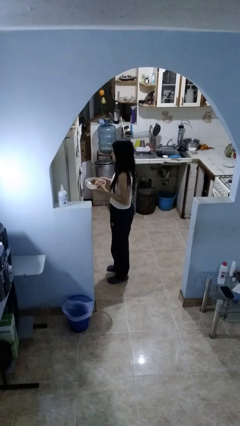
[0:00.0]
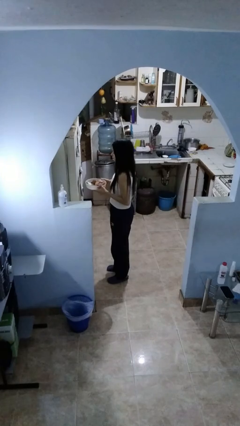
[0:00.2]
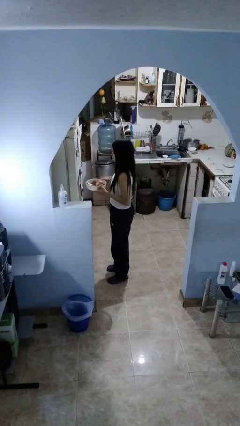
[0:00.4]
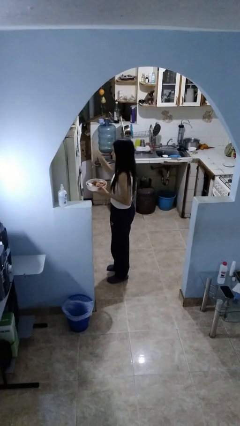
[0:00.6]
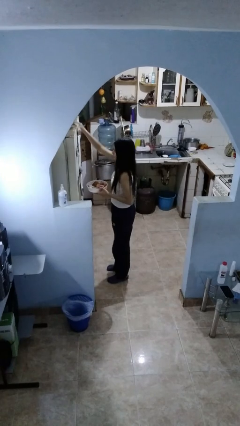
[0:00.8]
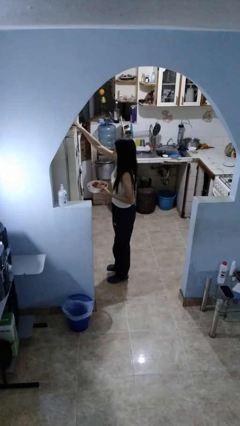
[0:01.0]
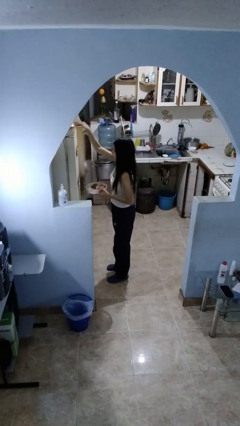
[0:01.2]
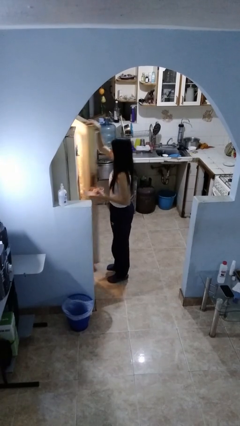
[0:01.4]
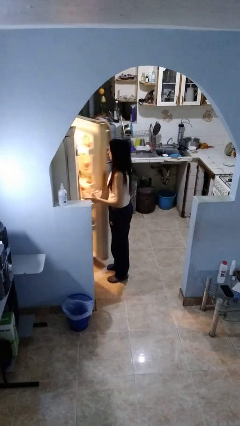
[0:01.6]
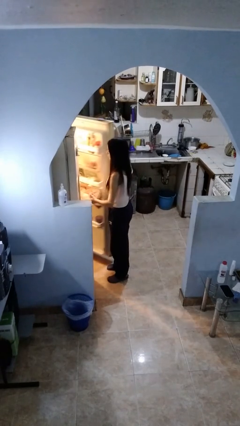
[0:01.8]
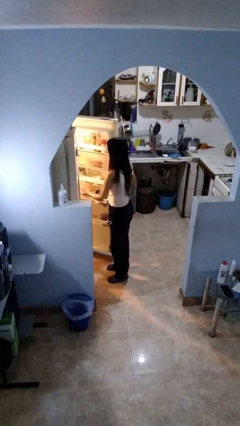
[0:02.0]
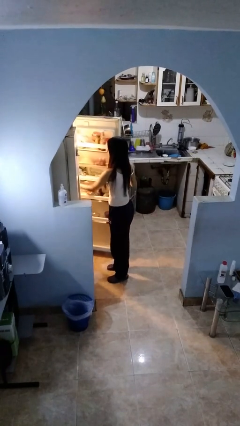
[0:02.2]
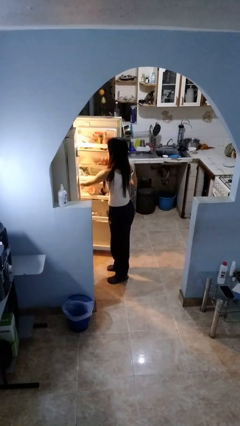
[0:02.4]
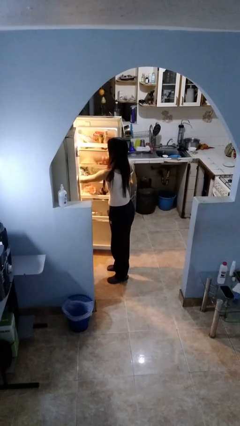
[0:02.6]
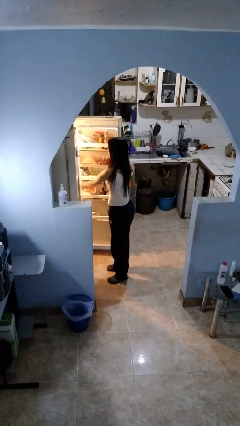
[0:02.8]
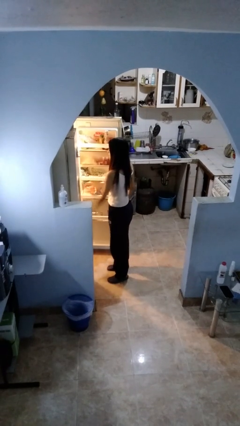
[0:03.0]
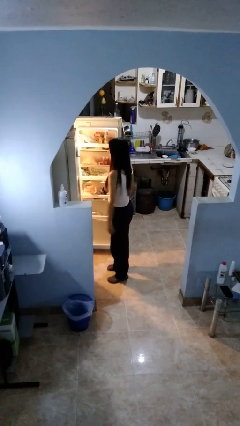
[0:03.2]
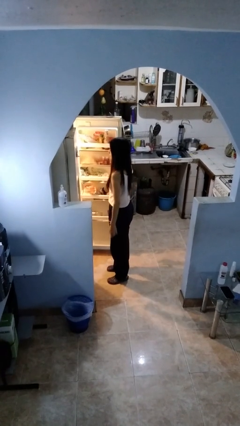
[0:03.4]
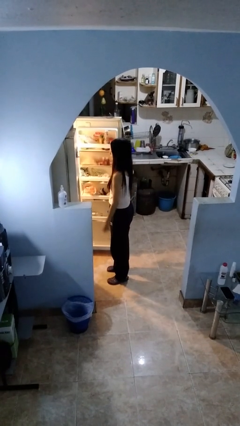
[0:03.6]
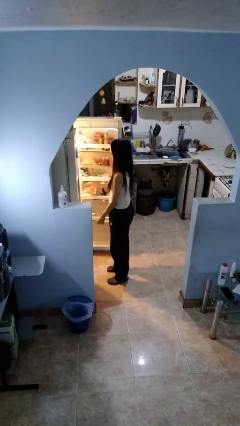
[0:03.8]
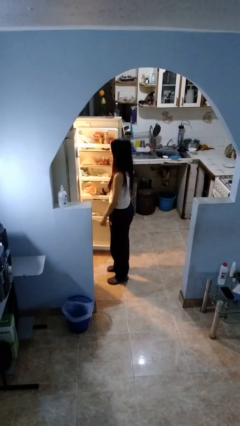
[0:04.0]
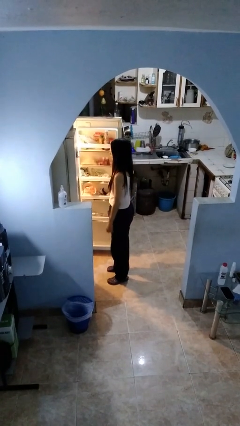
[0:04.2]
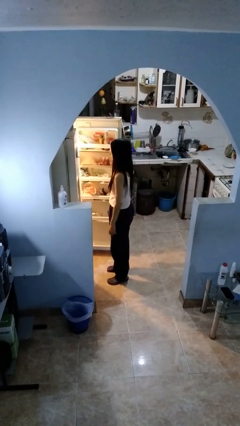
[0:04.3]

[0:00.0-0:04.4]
person puts object into refrigerator

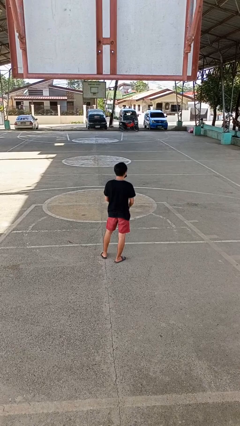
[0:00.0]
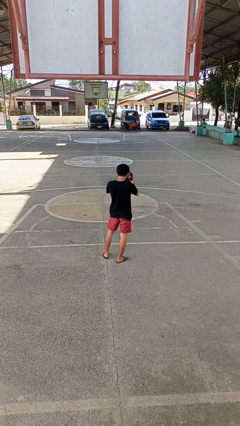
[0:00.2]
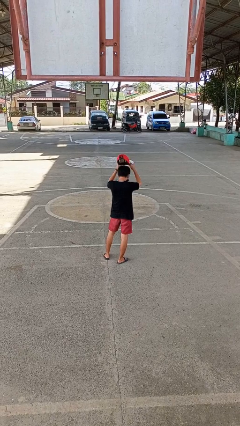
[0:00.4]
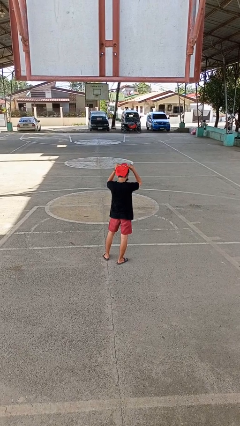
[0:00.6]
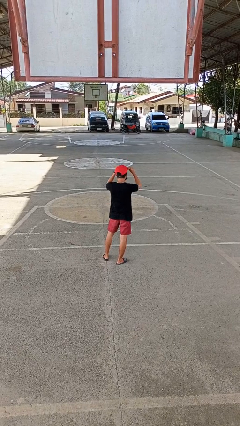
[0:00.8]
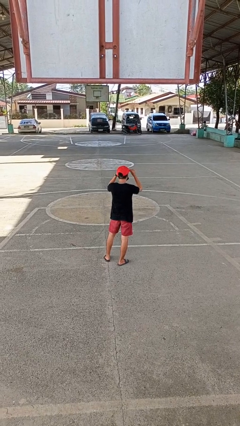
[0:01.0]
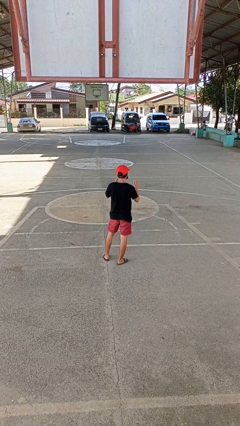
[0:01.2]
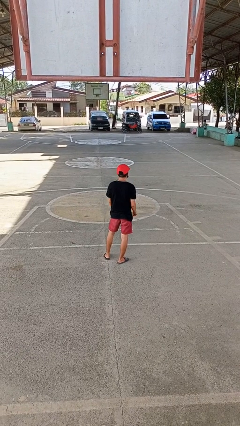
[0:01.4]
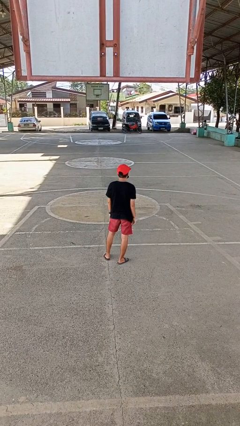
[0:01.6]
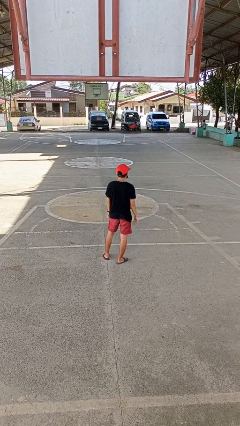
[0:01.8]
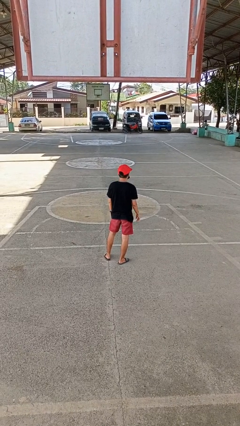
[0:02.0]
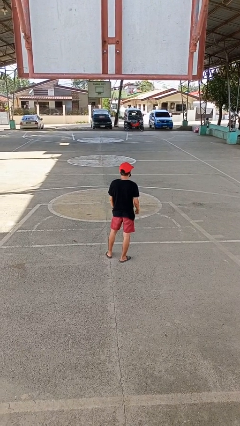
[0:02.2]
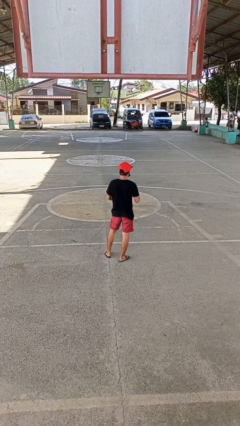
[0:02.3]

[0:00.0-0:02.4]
person puts on hat

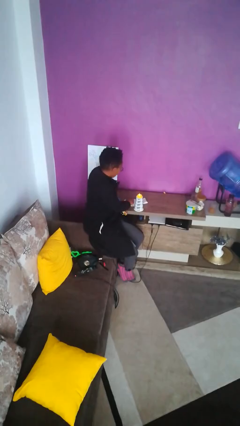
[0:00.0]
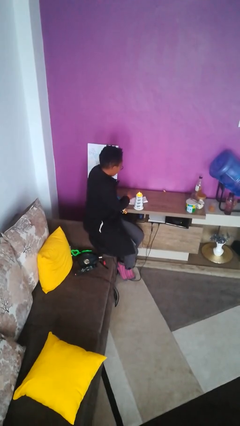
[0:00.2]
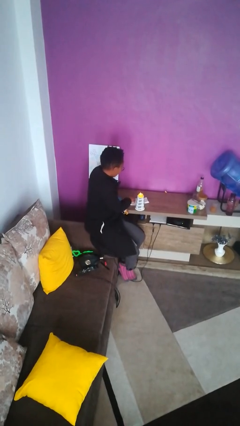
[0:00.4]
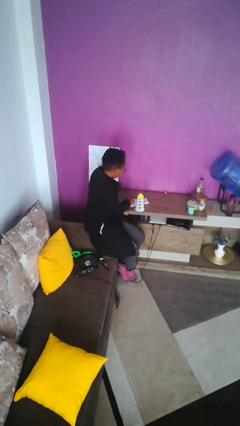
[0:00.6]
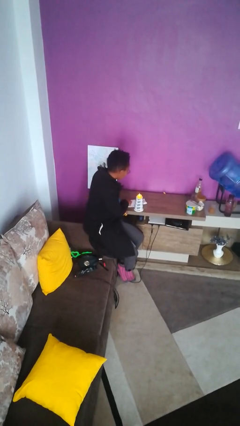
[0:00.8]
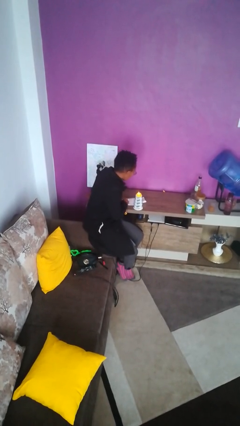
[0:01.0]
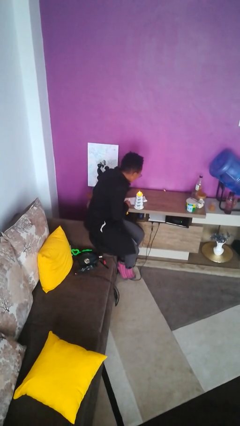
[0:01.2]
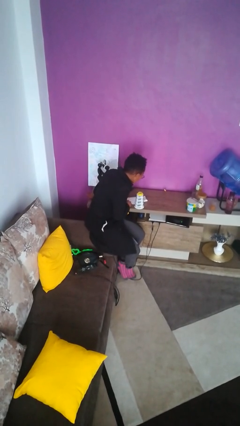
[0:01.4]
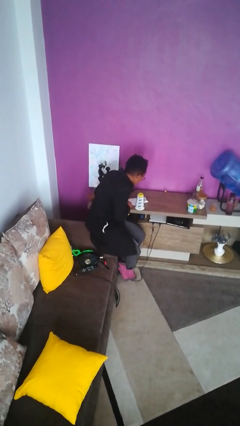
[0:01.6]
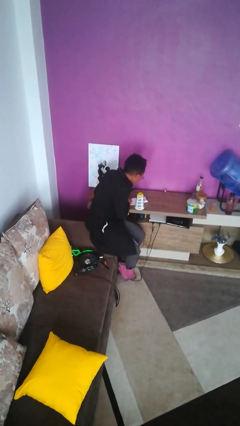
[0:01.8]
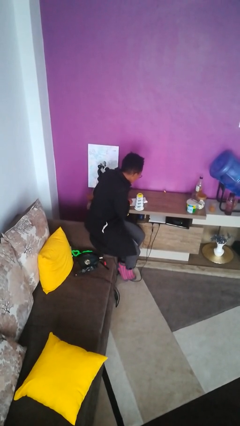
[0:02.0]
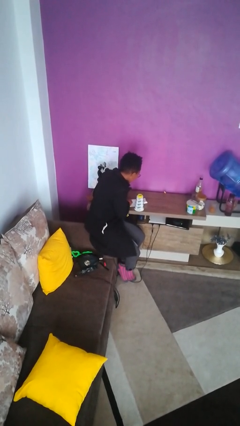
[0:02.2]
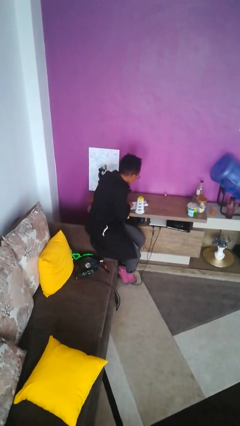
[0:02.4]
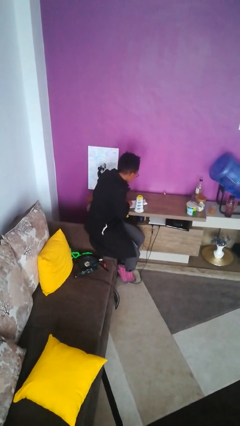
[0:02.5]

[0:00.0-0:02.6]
person extinguishes candle

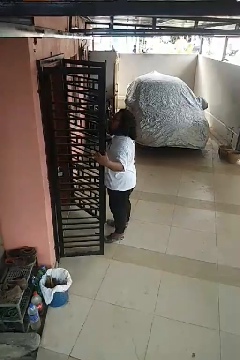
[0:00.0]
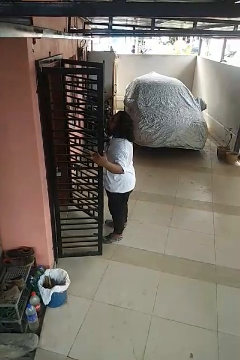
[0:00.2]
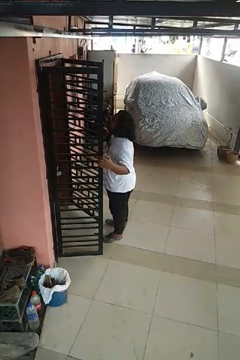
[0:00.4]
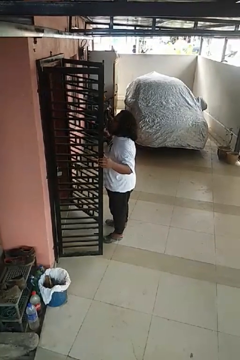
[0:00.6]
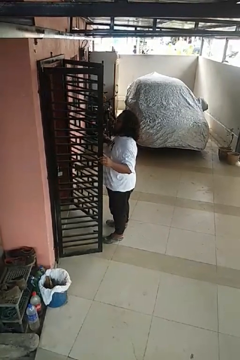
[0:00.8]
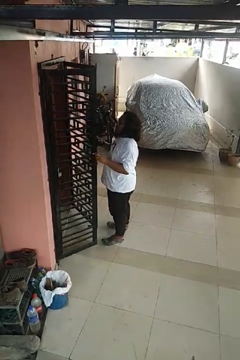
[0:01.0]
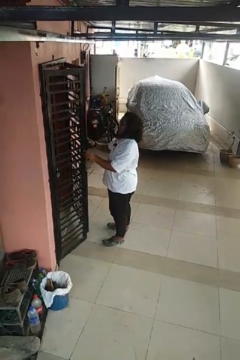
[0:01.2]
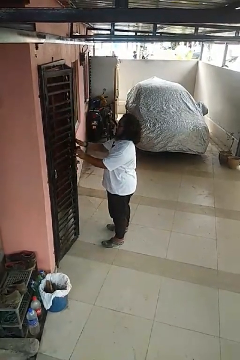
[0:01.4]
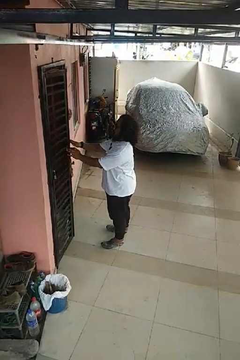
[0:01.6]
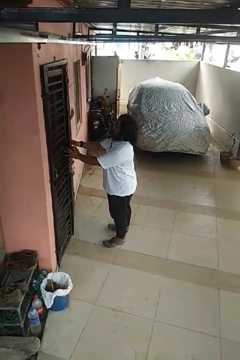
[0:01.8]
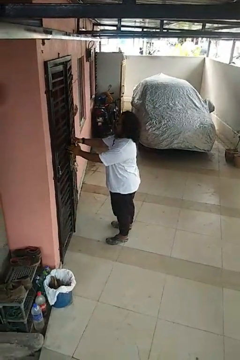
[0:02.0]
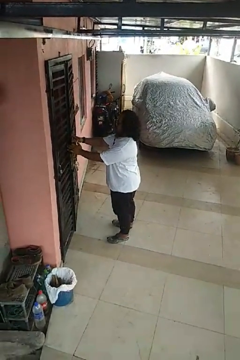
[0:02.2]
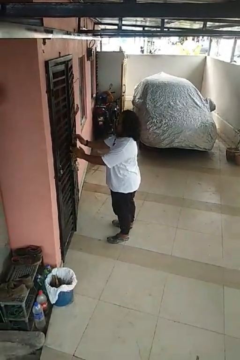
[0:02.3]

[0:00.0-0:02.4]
person closes gate

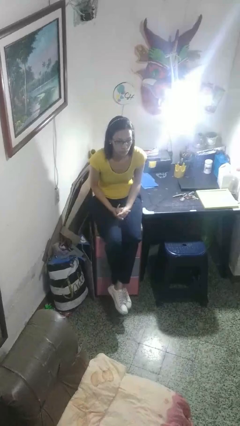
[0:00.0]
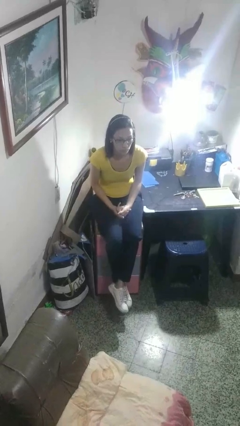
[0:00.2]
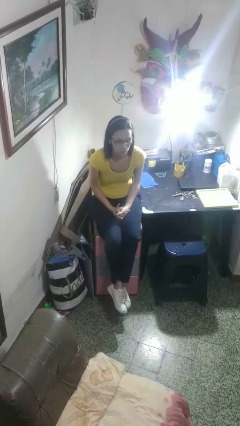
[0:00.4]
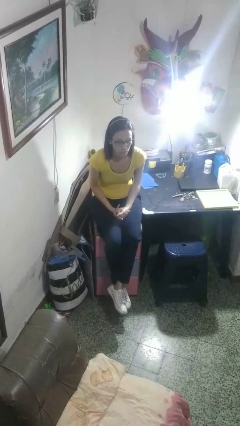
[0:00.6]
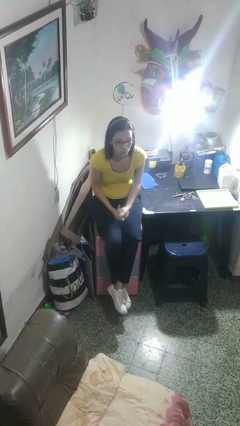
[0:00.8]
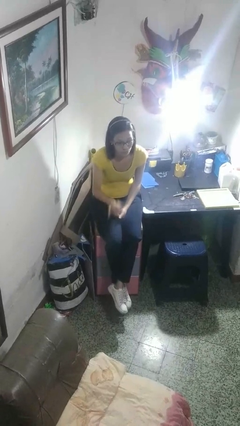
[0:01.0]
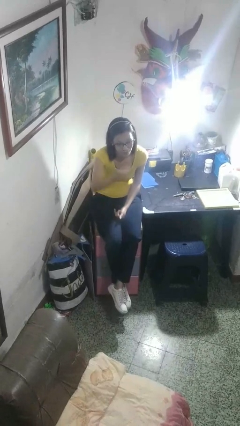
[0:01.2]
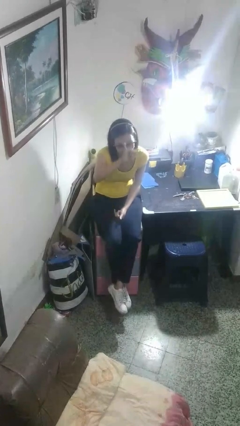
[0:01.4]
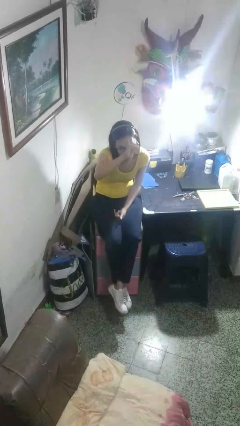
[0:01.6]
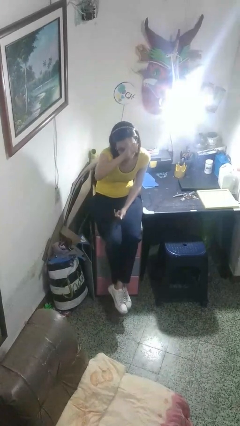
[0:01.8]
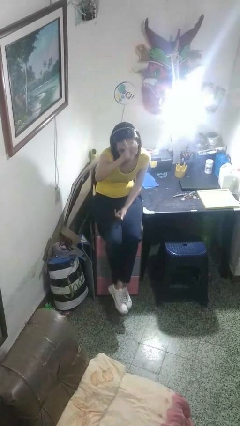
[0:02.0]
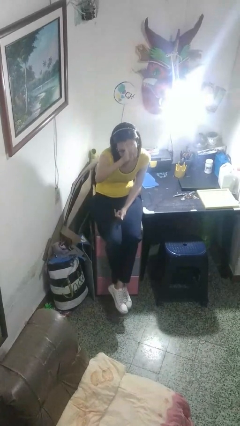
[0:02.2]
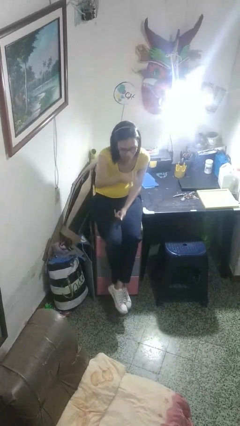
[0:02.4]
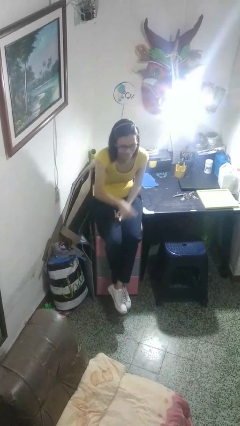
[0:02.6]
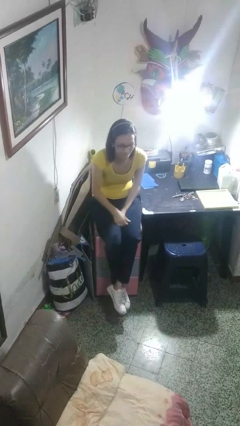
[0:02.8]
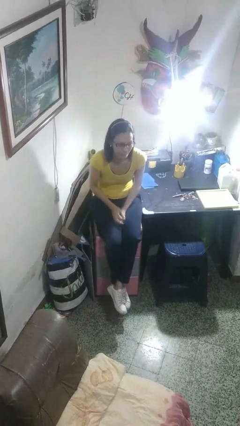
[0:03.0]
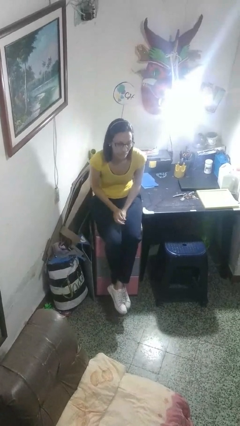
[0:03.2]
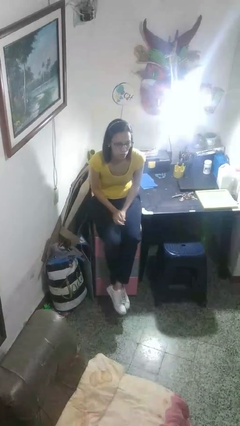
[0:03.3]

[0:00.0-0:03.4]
person gestures hang loose

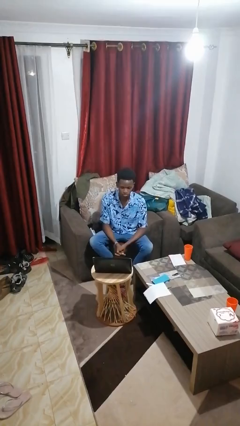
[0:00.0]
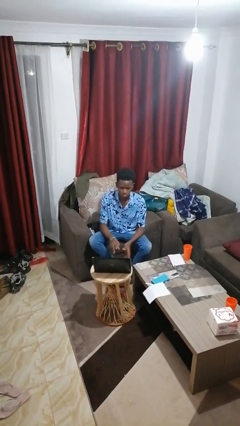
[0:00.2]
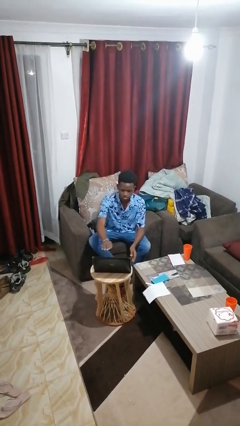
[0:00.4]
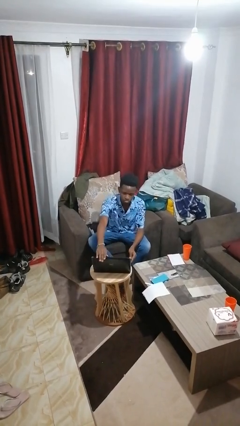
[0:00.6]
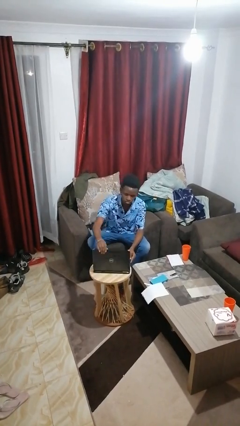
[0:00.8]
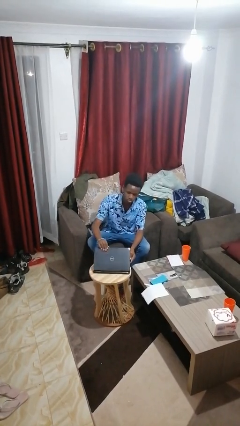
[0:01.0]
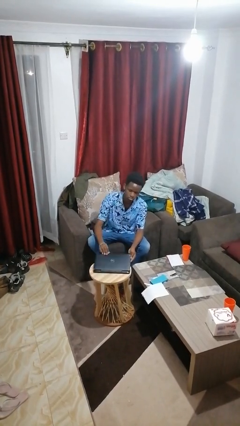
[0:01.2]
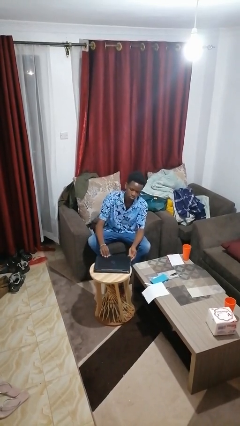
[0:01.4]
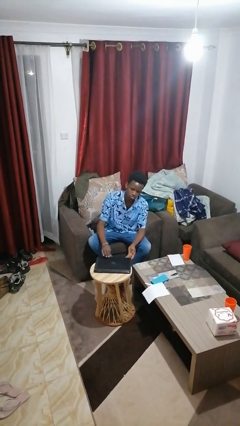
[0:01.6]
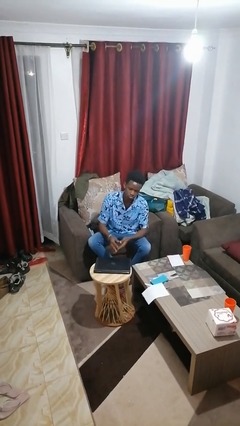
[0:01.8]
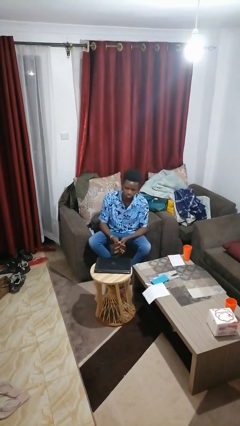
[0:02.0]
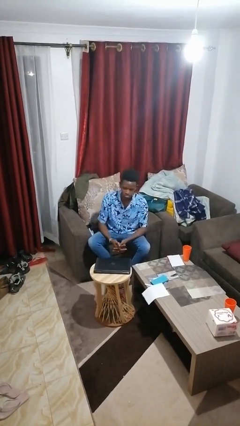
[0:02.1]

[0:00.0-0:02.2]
person closes laptop

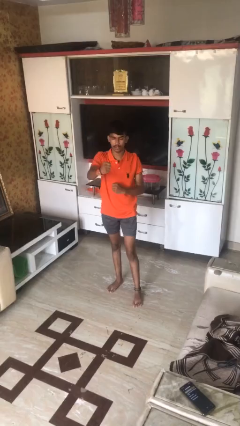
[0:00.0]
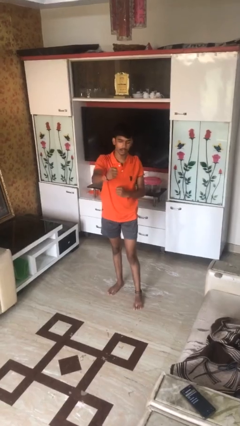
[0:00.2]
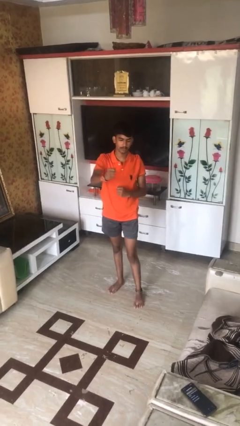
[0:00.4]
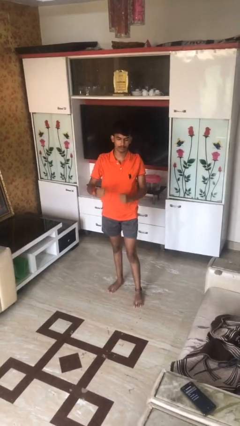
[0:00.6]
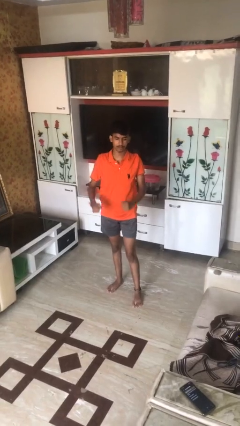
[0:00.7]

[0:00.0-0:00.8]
person punches
